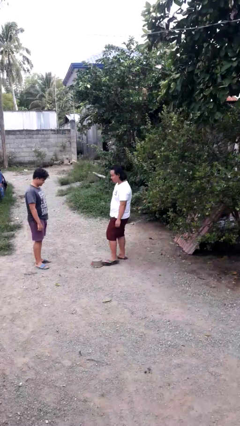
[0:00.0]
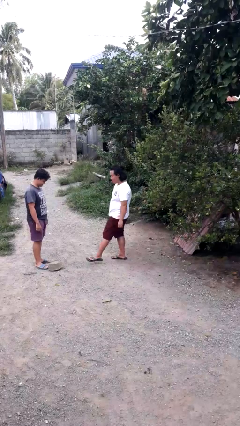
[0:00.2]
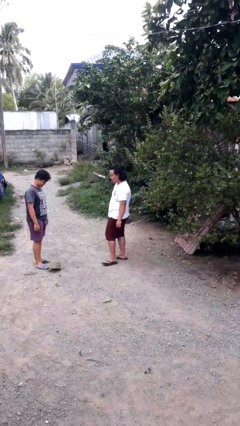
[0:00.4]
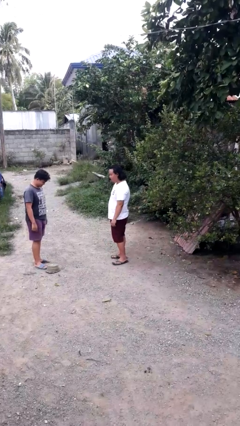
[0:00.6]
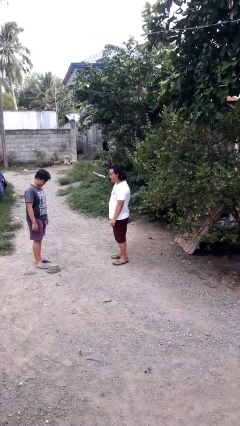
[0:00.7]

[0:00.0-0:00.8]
person kicks object to person

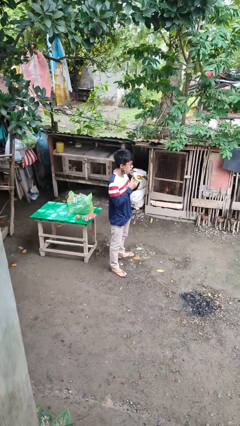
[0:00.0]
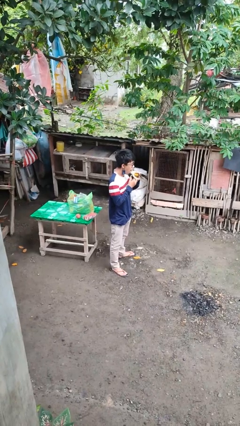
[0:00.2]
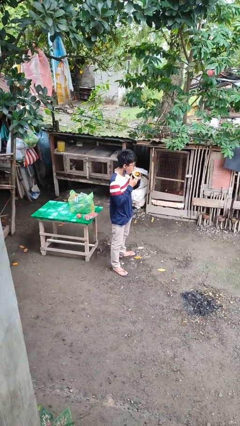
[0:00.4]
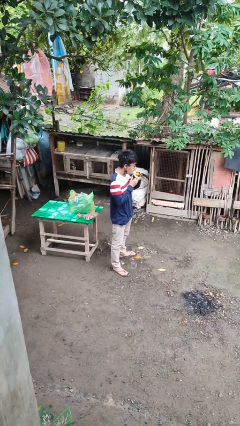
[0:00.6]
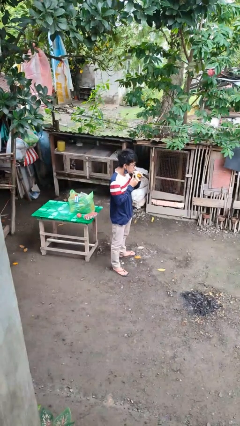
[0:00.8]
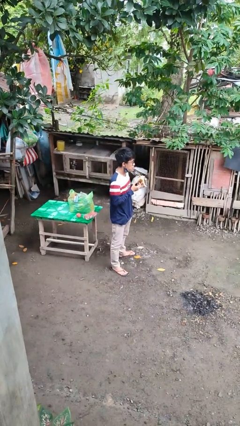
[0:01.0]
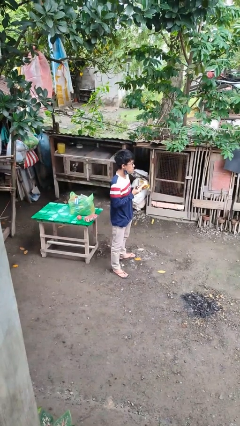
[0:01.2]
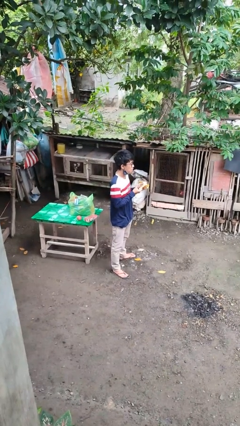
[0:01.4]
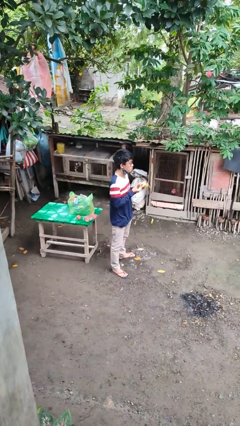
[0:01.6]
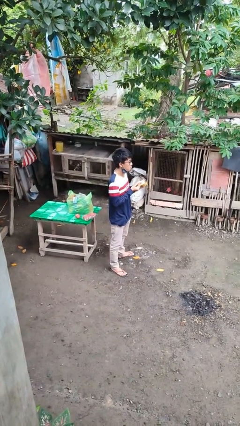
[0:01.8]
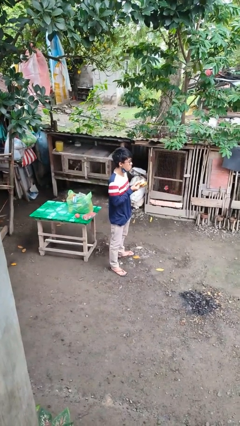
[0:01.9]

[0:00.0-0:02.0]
person eats banana

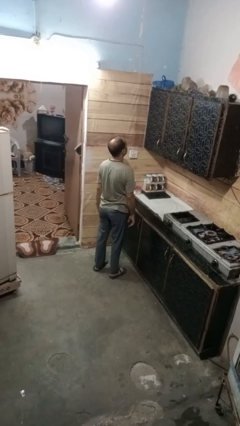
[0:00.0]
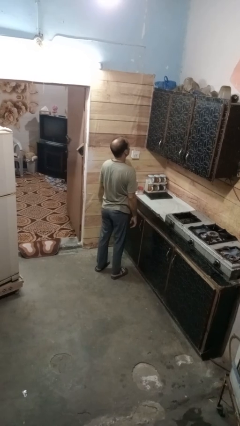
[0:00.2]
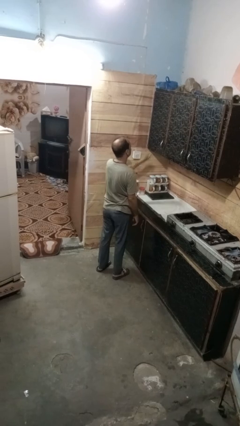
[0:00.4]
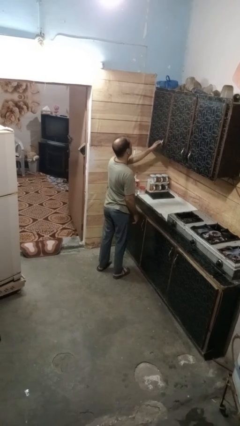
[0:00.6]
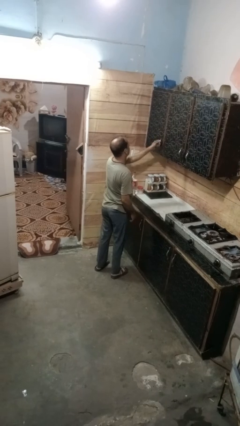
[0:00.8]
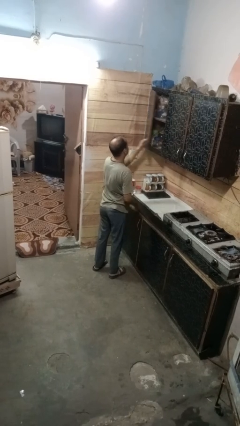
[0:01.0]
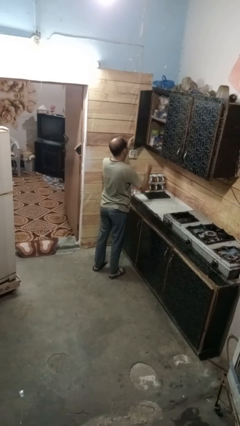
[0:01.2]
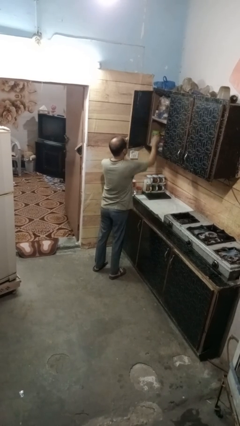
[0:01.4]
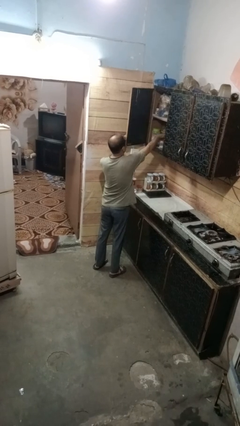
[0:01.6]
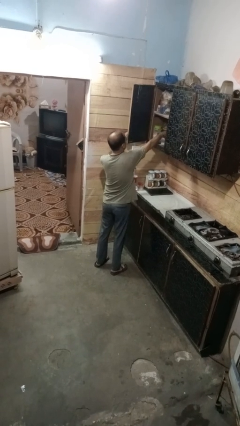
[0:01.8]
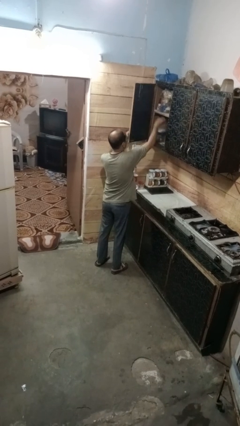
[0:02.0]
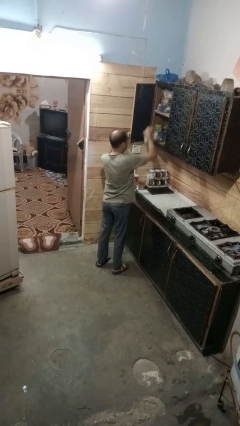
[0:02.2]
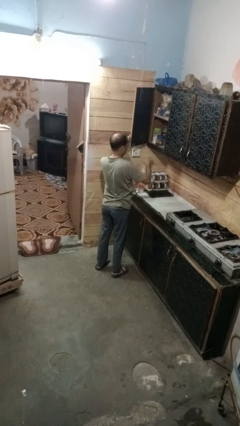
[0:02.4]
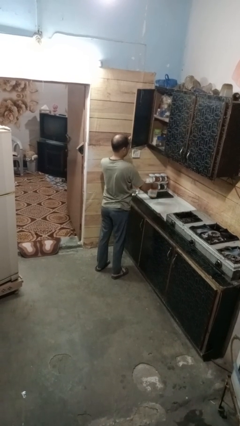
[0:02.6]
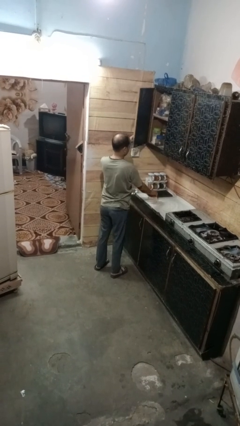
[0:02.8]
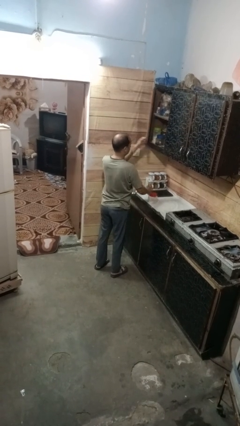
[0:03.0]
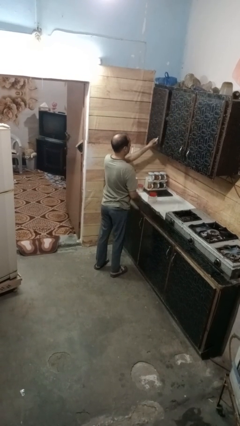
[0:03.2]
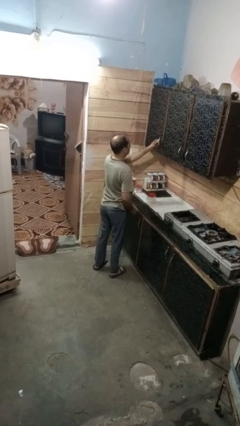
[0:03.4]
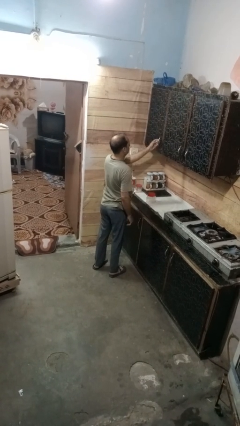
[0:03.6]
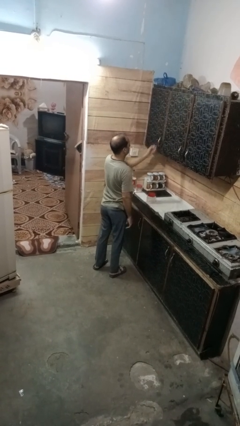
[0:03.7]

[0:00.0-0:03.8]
person takes object from cabinet

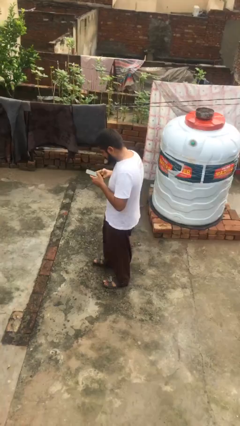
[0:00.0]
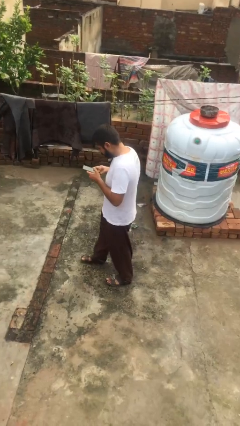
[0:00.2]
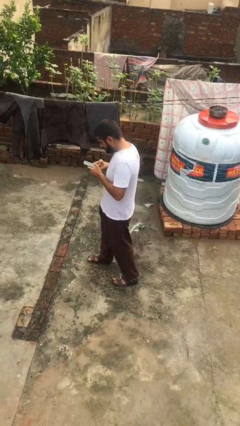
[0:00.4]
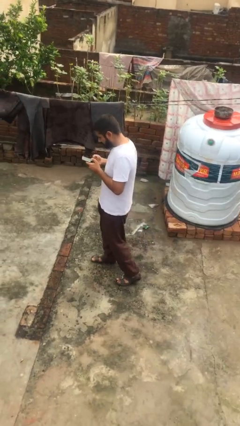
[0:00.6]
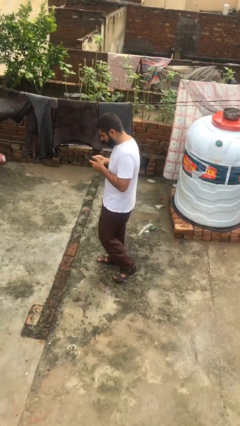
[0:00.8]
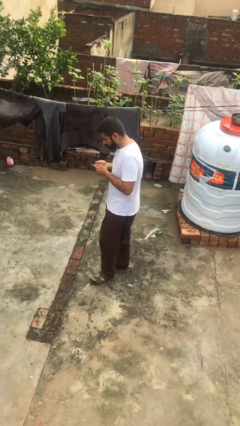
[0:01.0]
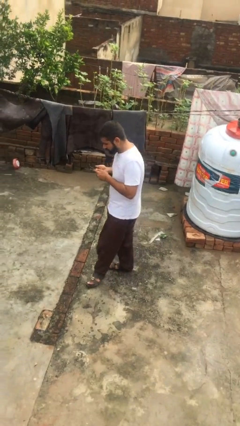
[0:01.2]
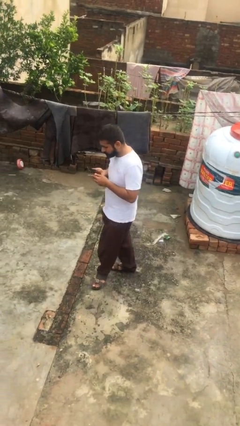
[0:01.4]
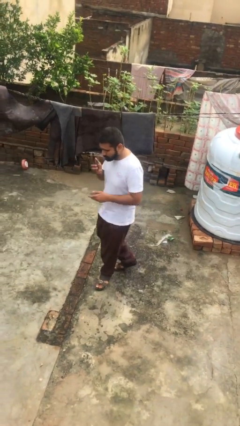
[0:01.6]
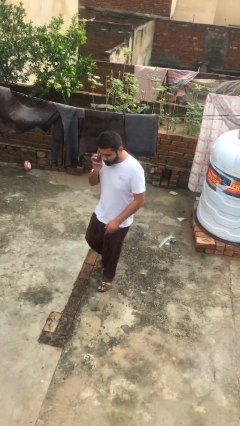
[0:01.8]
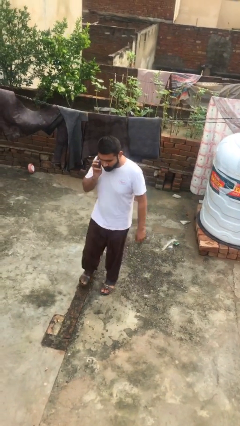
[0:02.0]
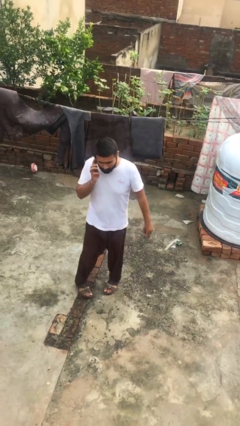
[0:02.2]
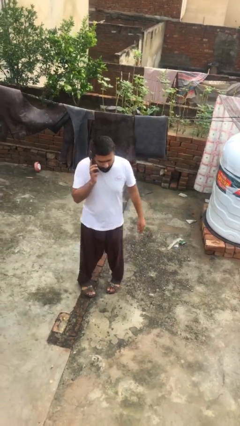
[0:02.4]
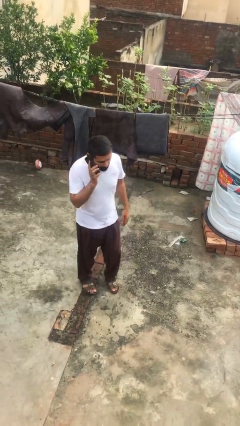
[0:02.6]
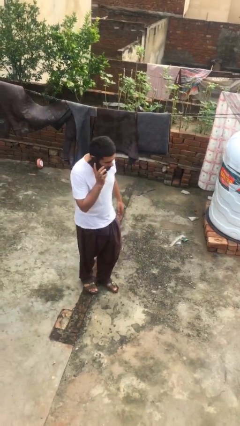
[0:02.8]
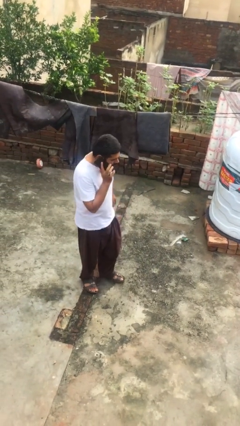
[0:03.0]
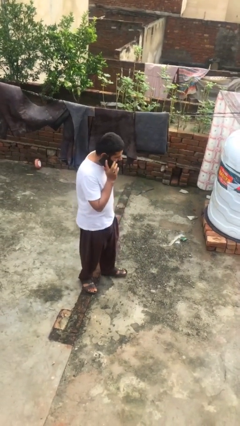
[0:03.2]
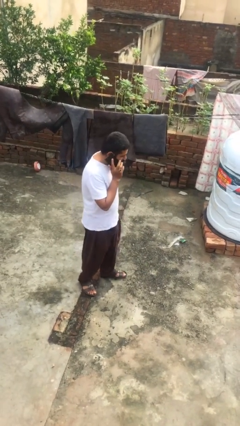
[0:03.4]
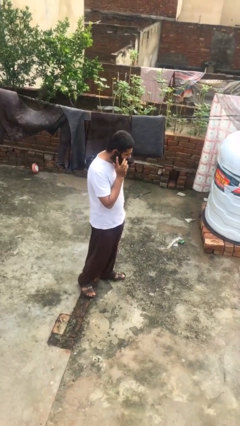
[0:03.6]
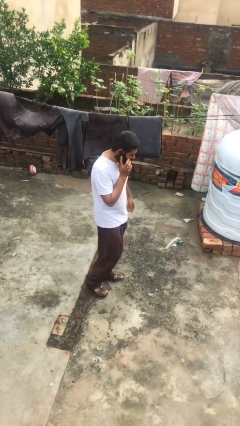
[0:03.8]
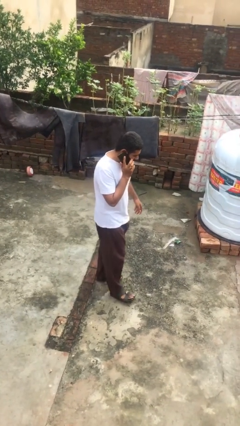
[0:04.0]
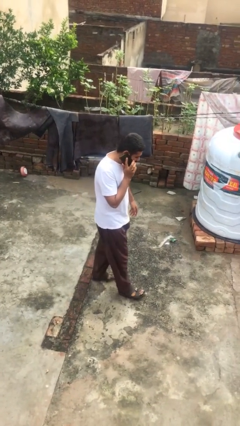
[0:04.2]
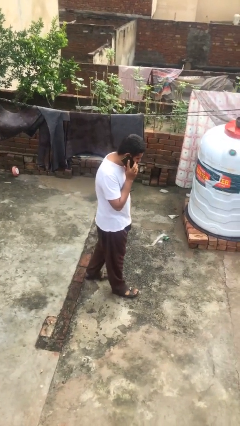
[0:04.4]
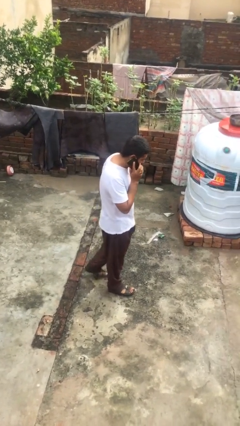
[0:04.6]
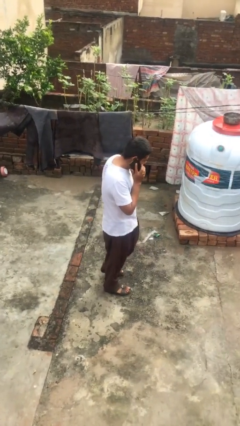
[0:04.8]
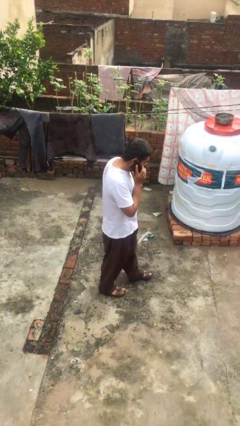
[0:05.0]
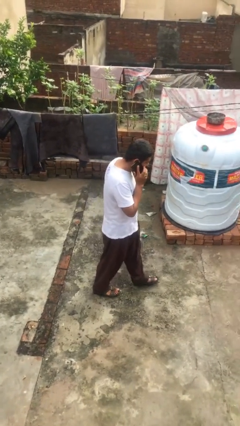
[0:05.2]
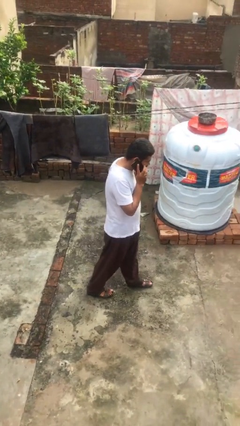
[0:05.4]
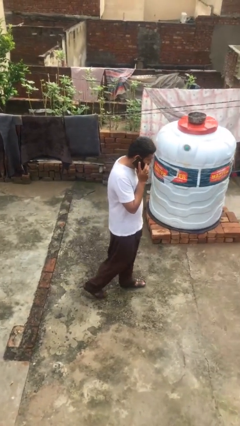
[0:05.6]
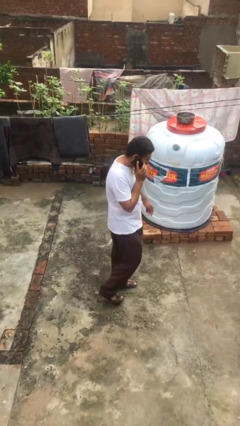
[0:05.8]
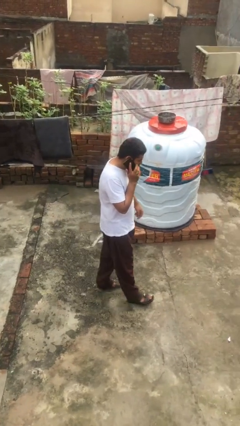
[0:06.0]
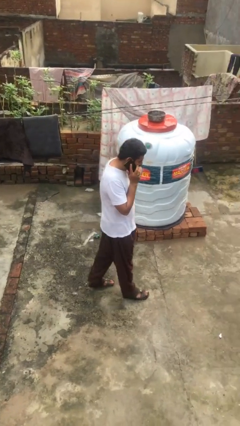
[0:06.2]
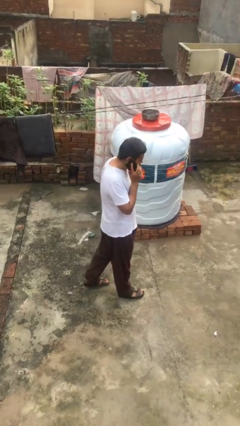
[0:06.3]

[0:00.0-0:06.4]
person talks on phone

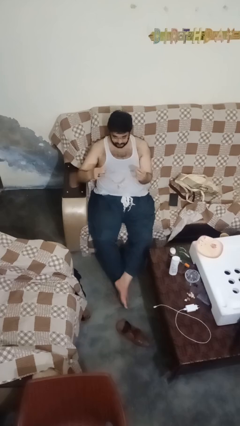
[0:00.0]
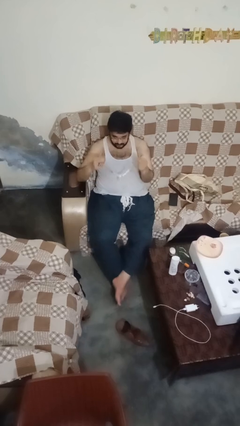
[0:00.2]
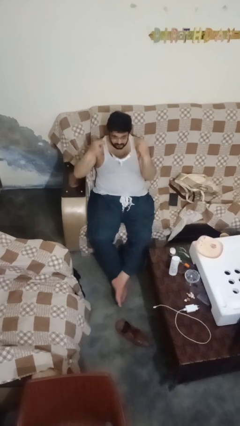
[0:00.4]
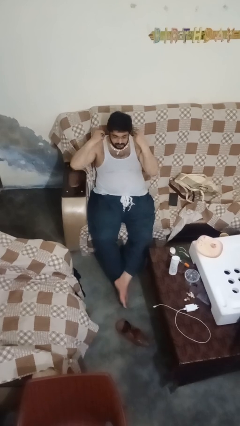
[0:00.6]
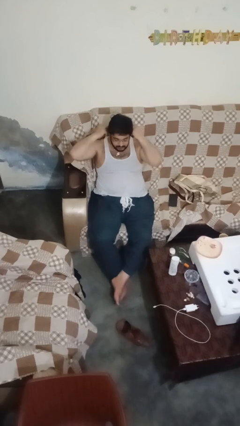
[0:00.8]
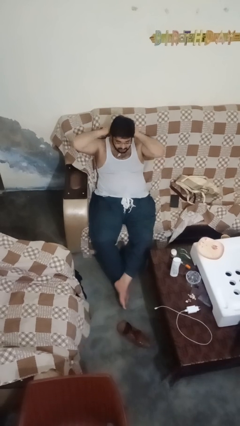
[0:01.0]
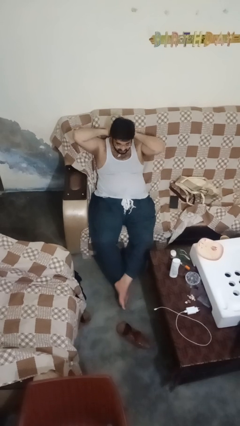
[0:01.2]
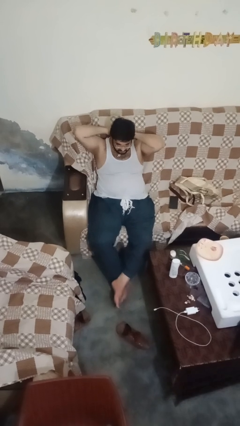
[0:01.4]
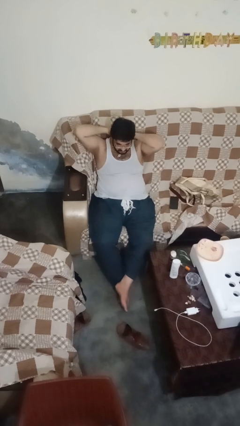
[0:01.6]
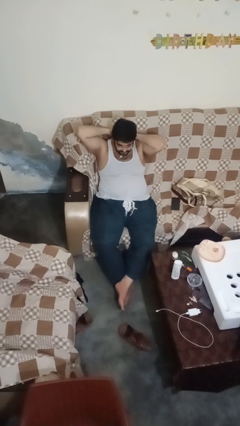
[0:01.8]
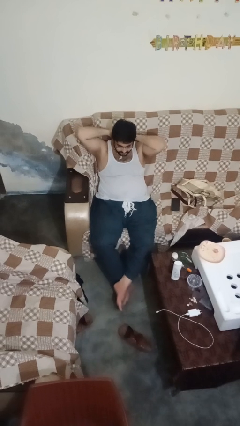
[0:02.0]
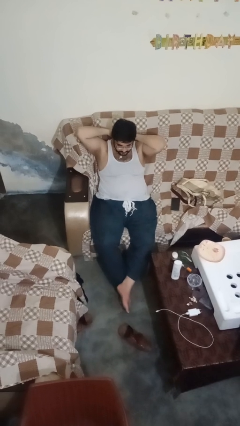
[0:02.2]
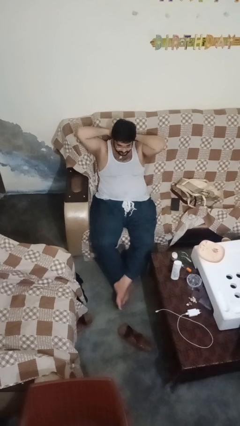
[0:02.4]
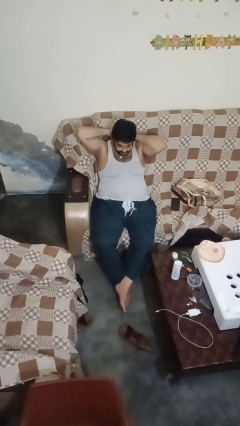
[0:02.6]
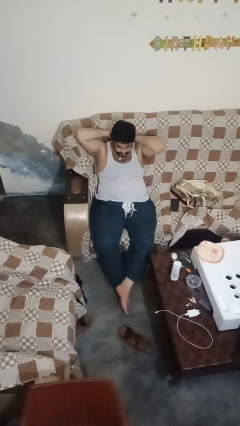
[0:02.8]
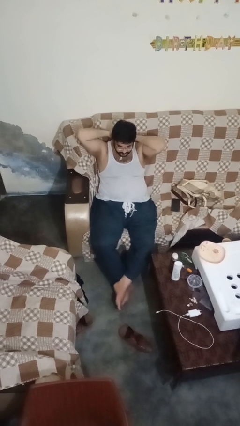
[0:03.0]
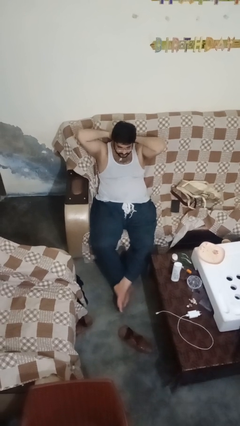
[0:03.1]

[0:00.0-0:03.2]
person puts on necklace

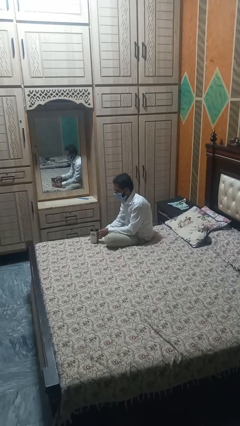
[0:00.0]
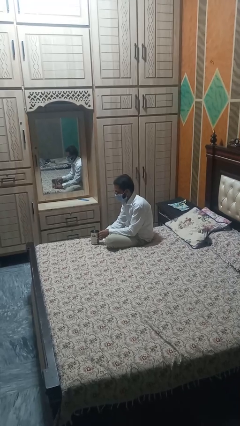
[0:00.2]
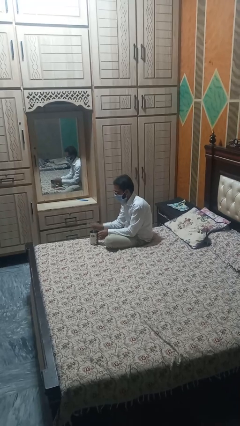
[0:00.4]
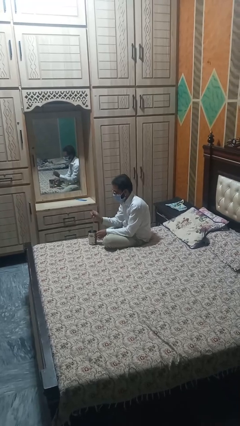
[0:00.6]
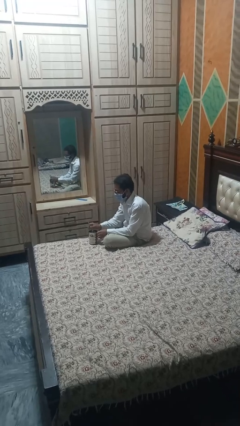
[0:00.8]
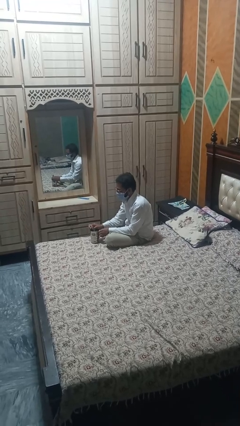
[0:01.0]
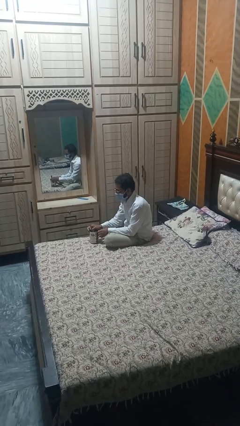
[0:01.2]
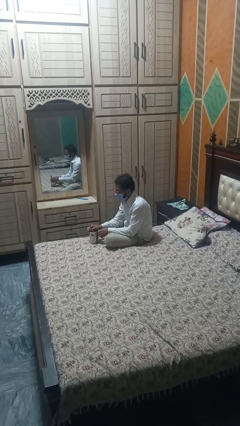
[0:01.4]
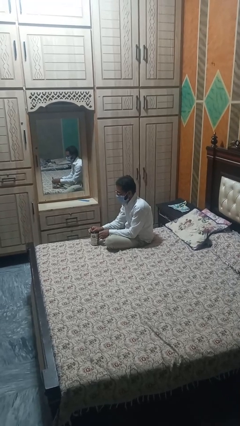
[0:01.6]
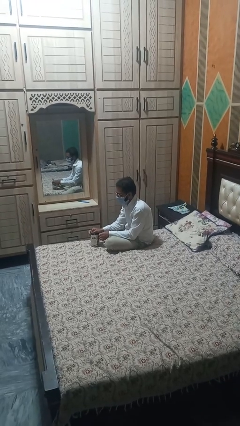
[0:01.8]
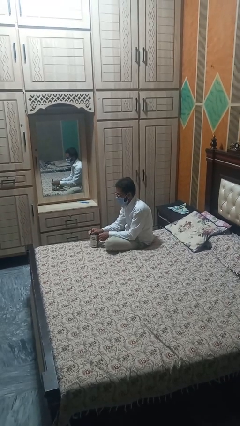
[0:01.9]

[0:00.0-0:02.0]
person stirs mug
